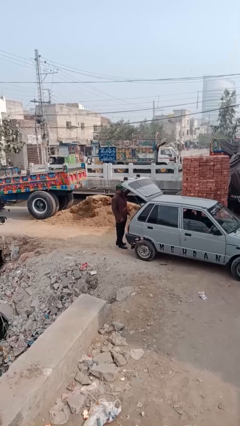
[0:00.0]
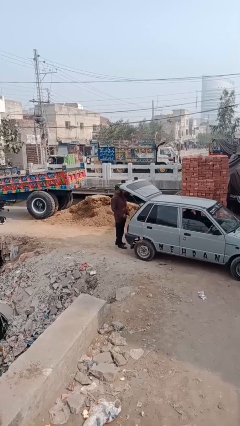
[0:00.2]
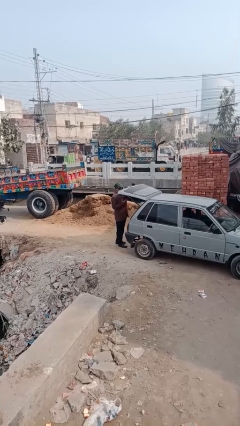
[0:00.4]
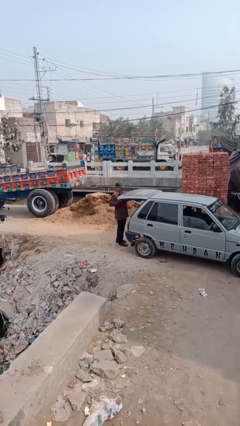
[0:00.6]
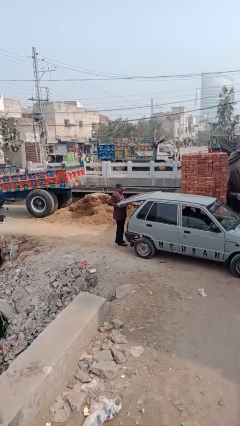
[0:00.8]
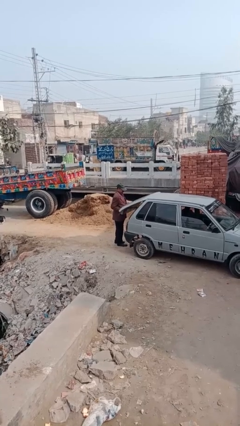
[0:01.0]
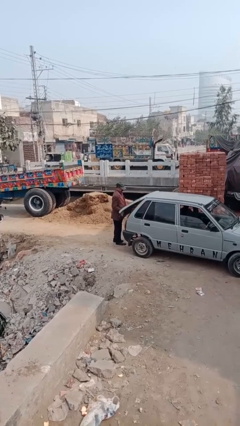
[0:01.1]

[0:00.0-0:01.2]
person closes car trunk

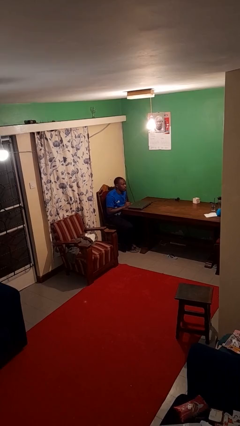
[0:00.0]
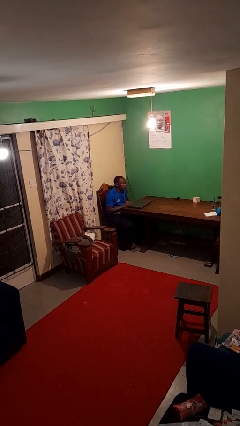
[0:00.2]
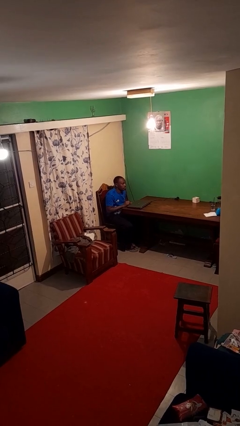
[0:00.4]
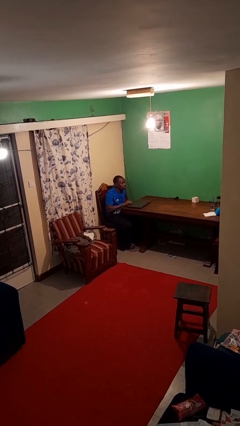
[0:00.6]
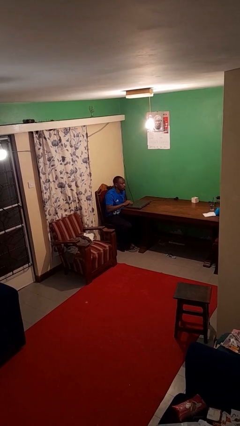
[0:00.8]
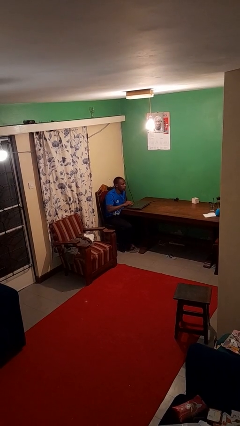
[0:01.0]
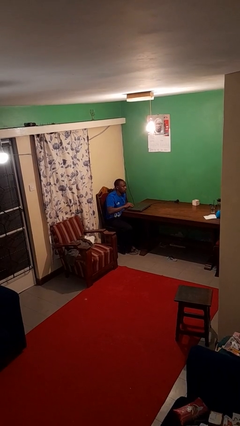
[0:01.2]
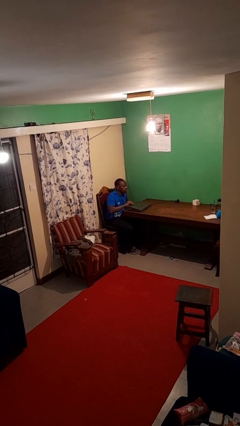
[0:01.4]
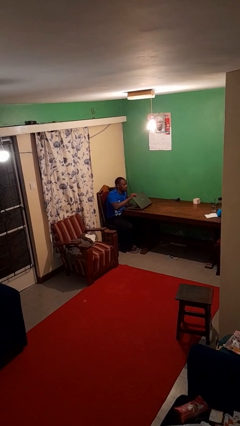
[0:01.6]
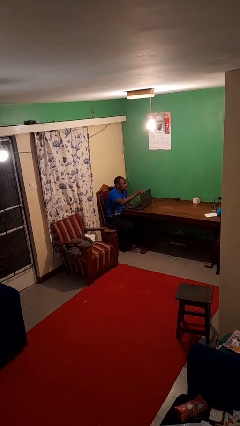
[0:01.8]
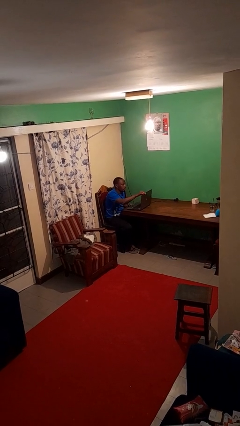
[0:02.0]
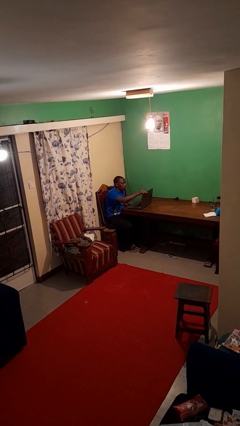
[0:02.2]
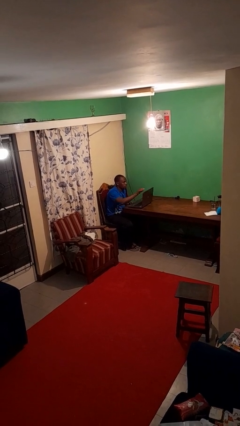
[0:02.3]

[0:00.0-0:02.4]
person opens laptop

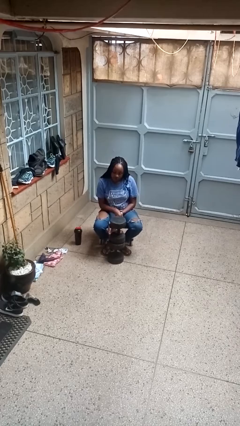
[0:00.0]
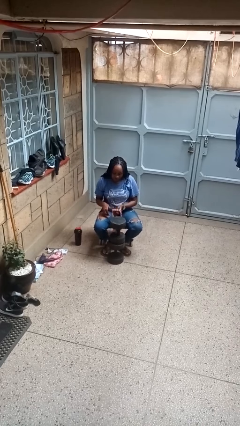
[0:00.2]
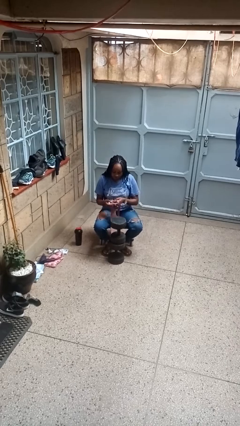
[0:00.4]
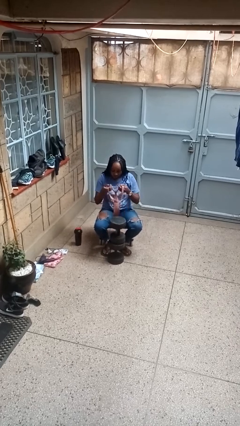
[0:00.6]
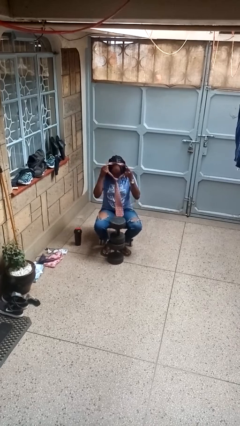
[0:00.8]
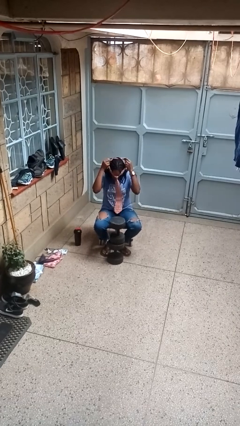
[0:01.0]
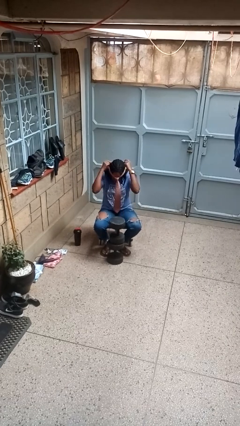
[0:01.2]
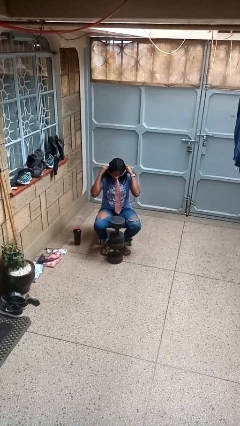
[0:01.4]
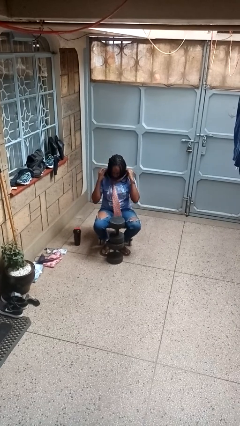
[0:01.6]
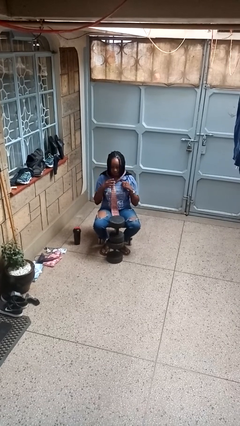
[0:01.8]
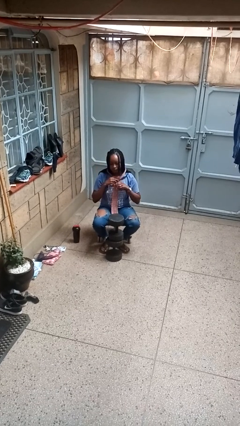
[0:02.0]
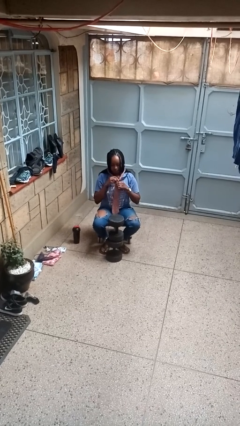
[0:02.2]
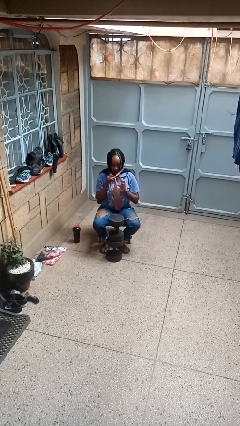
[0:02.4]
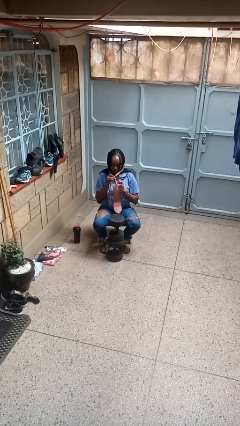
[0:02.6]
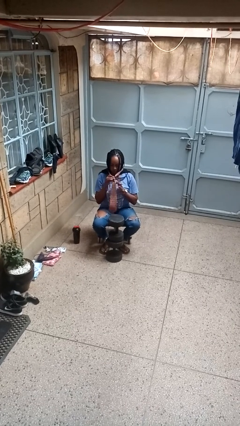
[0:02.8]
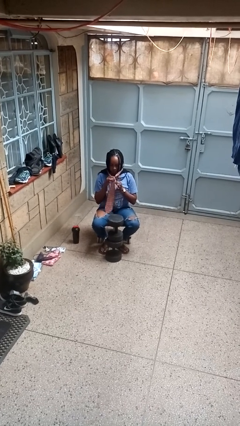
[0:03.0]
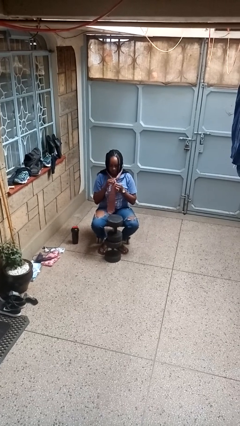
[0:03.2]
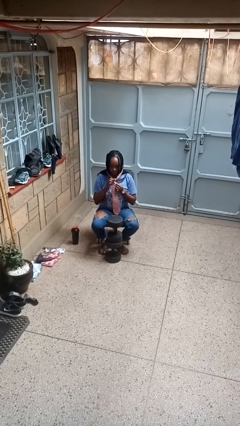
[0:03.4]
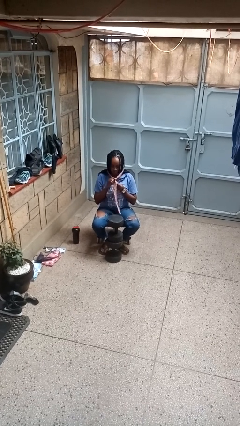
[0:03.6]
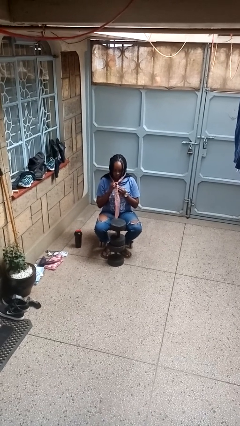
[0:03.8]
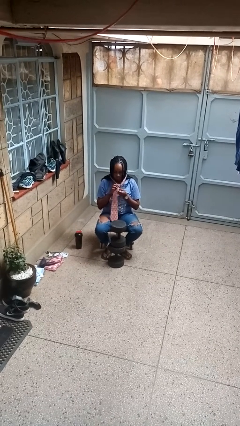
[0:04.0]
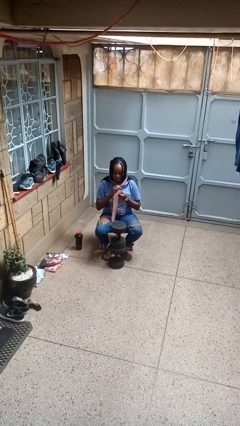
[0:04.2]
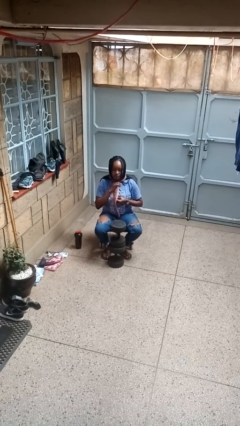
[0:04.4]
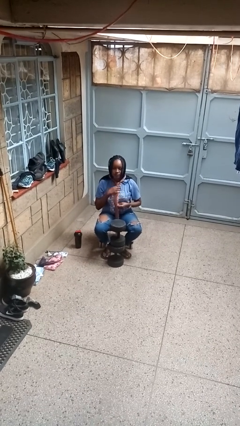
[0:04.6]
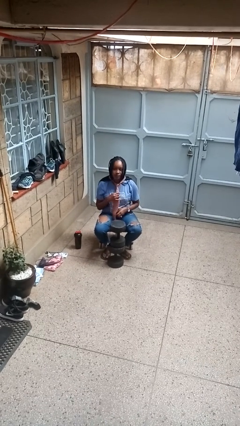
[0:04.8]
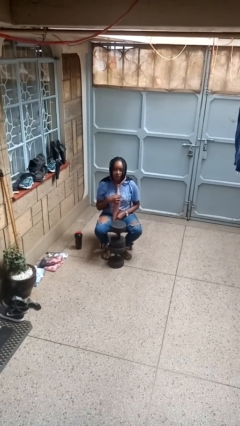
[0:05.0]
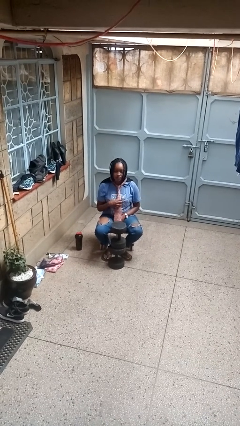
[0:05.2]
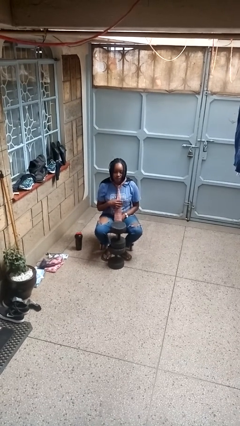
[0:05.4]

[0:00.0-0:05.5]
person puts on necktie

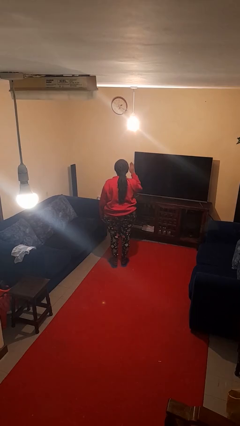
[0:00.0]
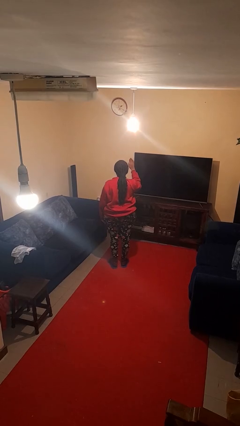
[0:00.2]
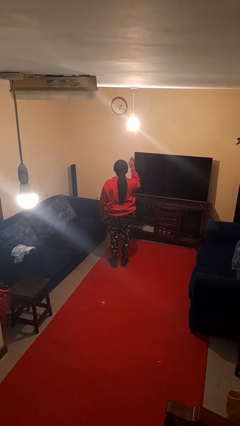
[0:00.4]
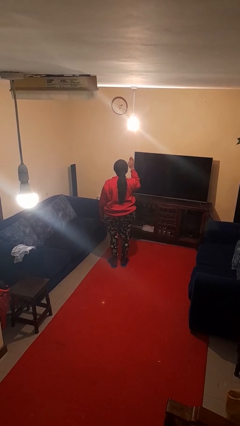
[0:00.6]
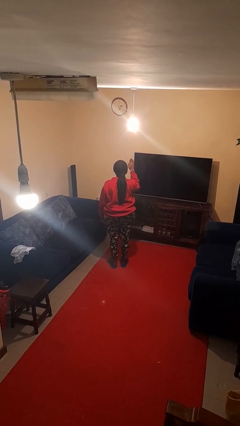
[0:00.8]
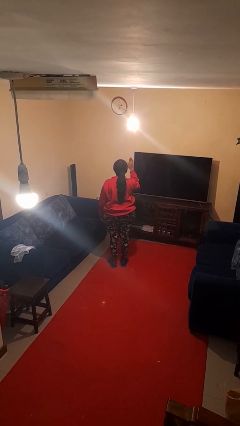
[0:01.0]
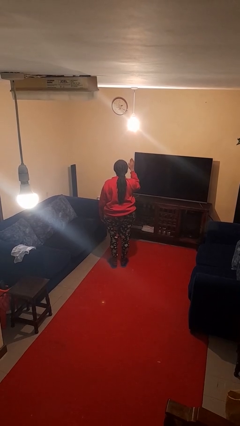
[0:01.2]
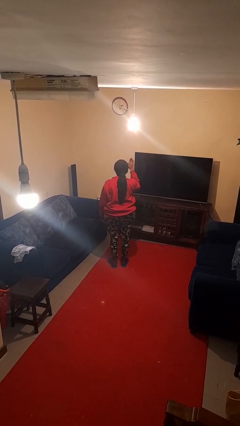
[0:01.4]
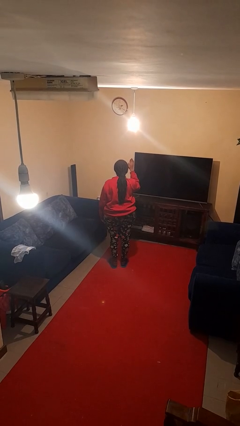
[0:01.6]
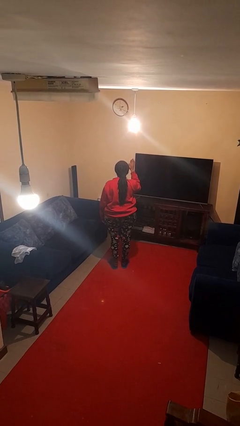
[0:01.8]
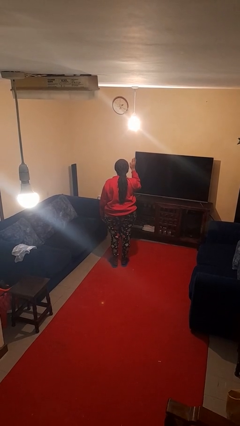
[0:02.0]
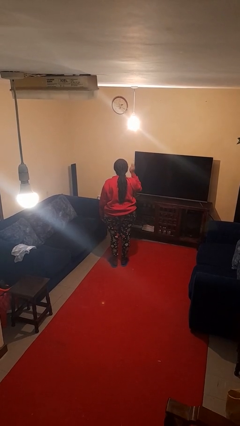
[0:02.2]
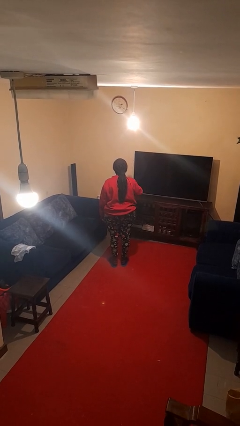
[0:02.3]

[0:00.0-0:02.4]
person gestures stop

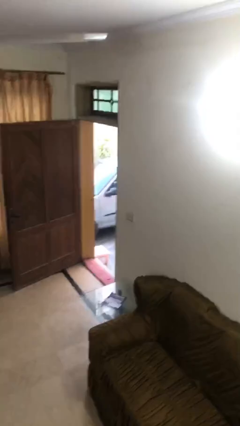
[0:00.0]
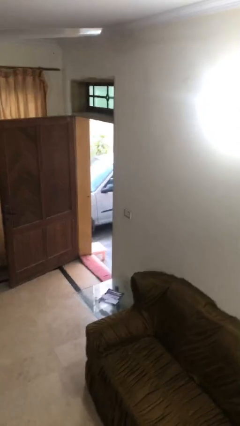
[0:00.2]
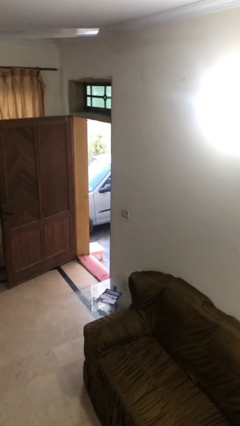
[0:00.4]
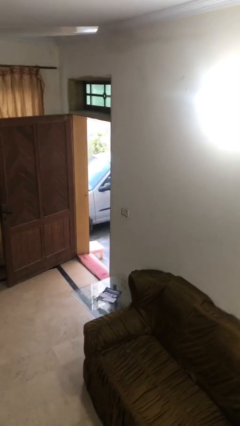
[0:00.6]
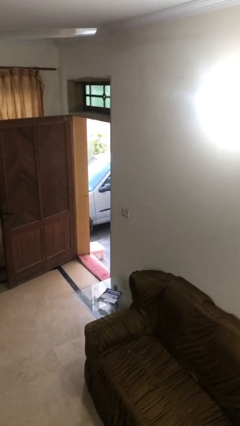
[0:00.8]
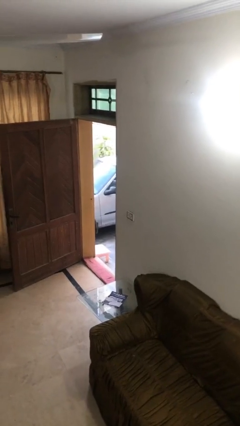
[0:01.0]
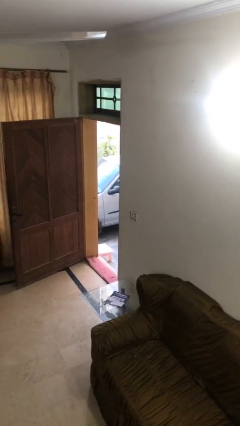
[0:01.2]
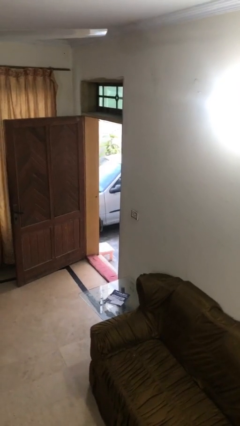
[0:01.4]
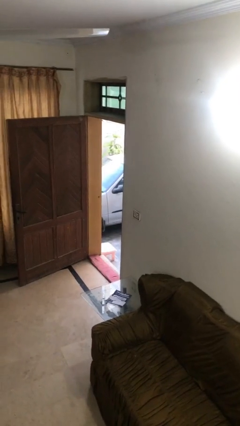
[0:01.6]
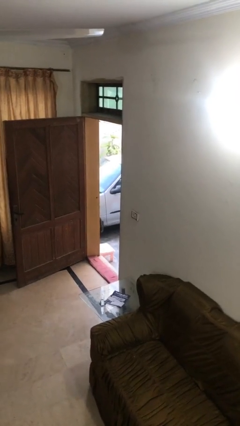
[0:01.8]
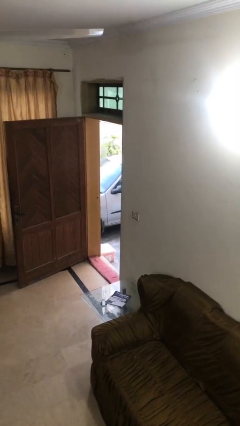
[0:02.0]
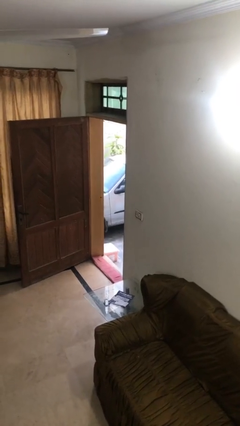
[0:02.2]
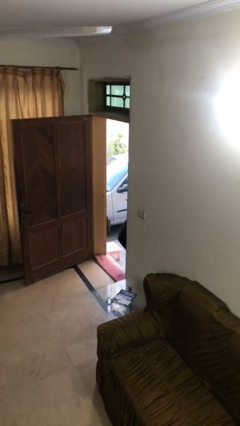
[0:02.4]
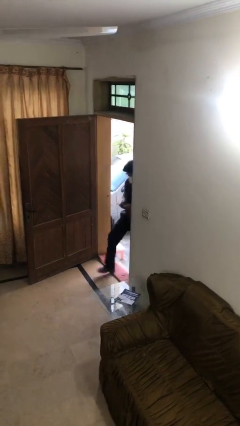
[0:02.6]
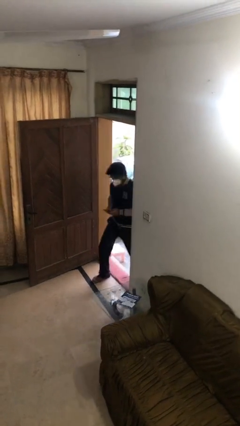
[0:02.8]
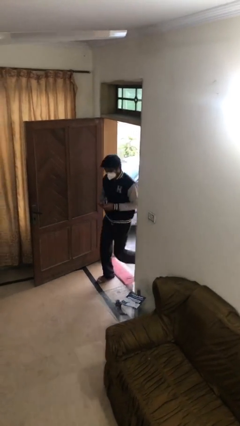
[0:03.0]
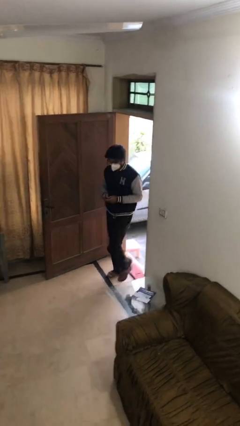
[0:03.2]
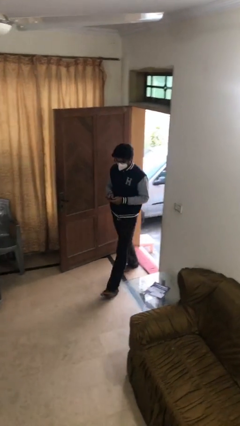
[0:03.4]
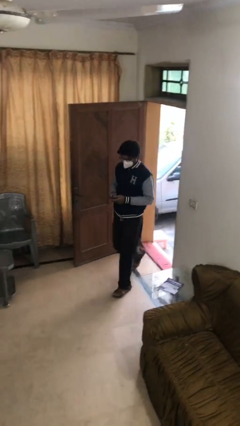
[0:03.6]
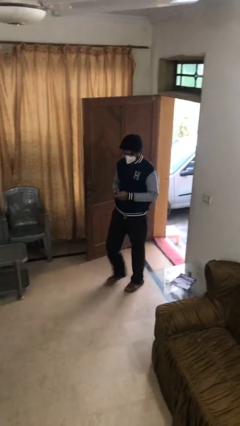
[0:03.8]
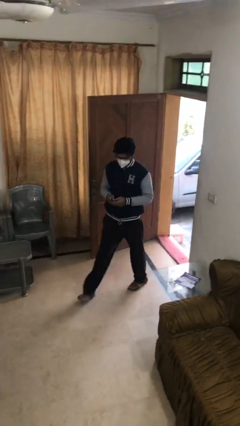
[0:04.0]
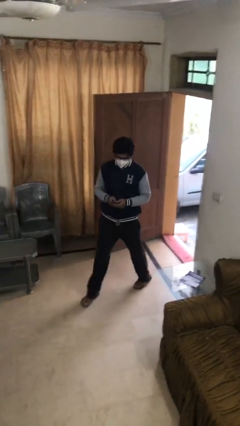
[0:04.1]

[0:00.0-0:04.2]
person enters scene through structure

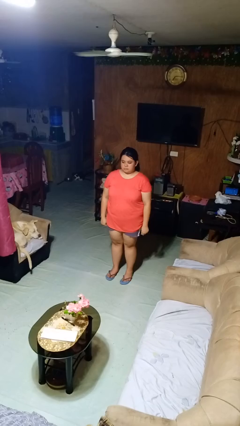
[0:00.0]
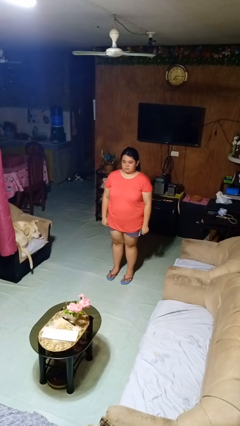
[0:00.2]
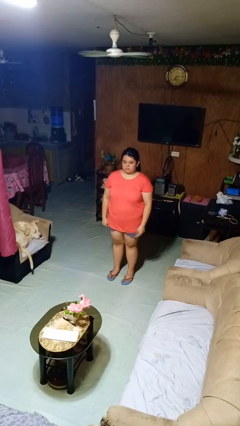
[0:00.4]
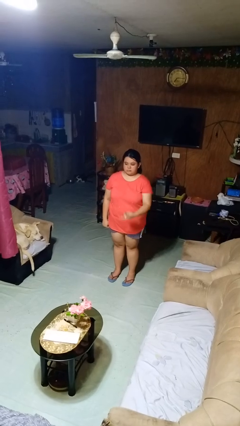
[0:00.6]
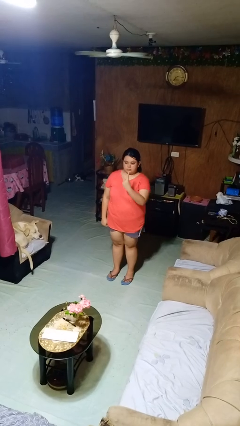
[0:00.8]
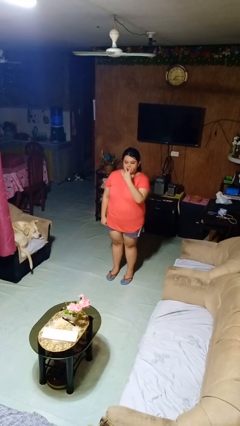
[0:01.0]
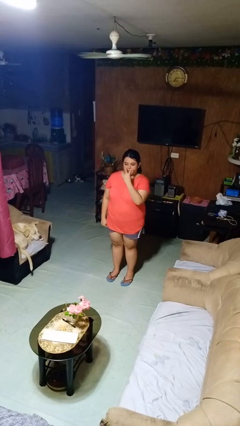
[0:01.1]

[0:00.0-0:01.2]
person gestures watch closely

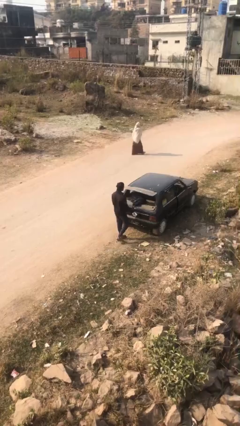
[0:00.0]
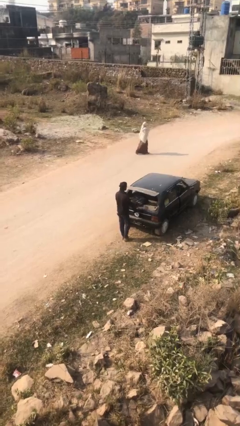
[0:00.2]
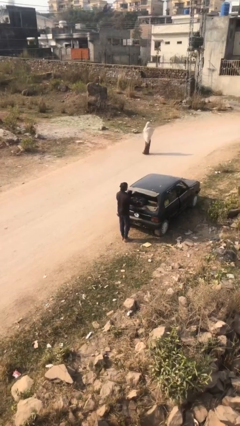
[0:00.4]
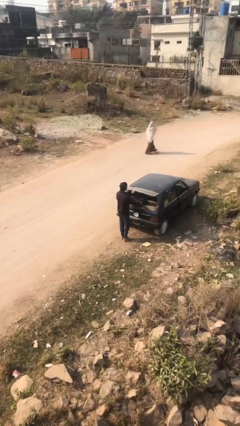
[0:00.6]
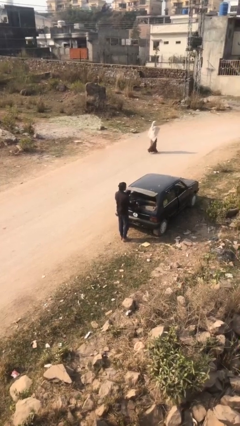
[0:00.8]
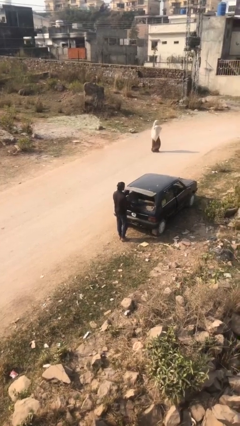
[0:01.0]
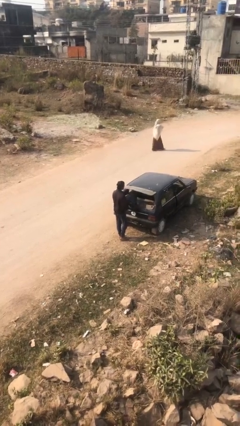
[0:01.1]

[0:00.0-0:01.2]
person unloads car
